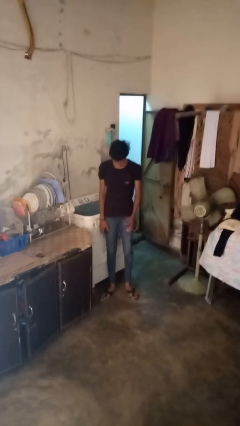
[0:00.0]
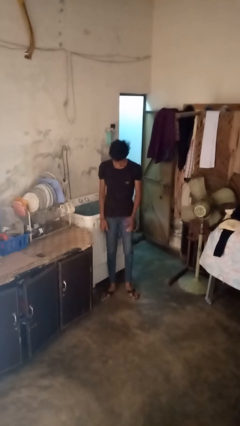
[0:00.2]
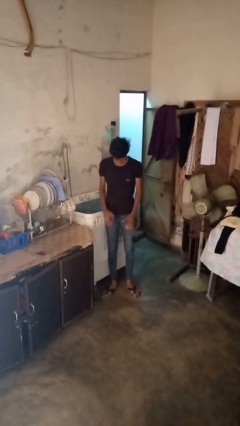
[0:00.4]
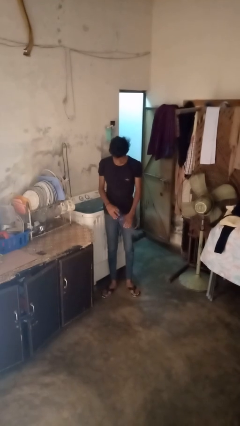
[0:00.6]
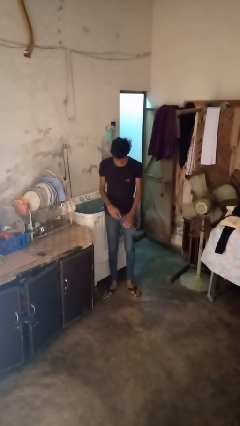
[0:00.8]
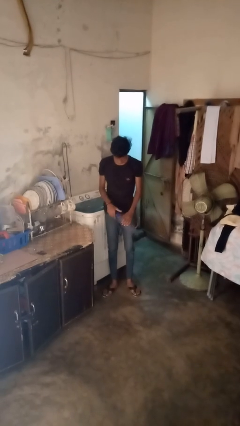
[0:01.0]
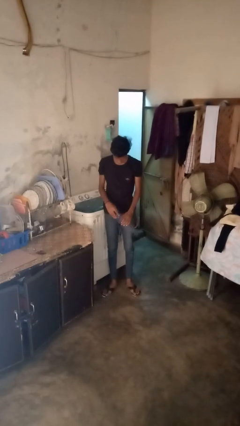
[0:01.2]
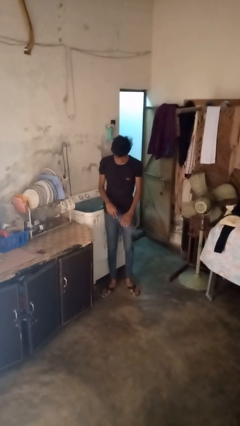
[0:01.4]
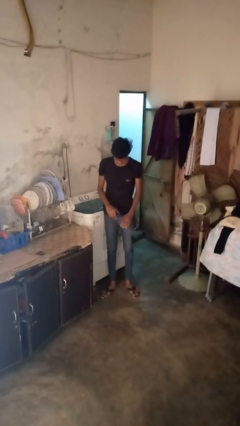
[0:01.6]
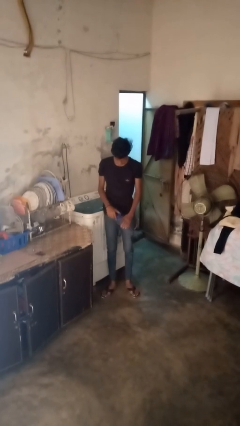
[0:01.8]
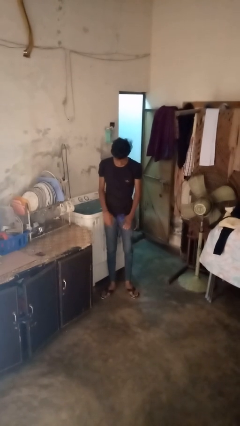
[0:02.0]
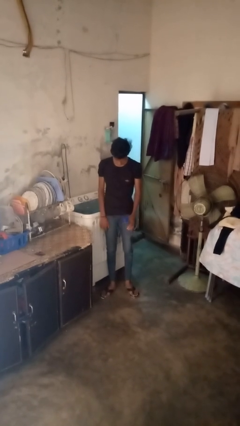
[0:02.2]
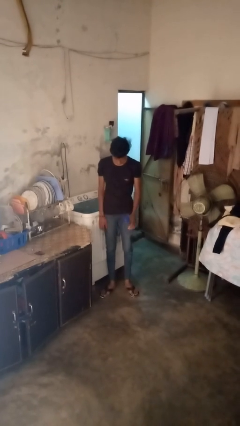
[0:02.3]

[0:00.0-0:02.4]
person screws lid to bottle

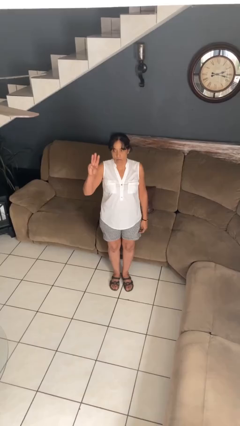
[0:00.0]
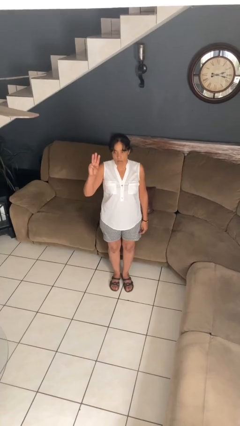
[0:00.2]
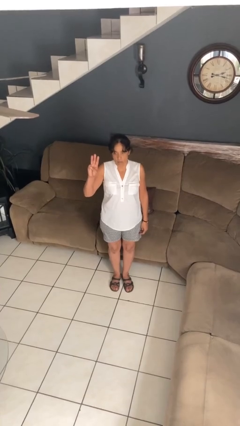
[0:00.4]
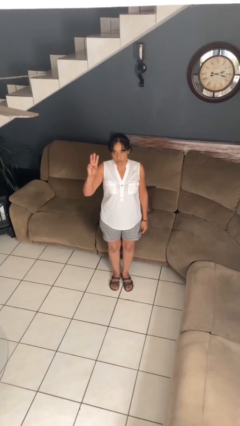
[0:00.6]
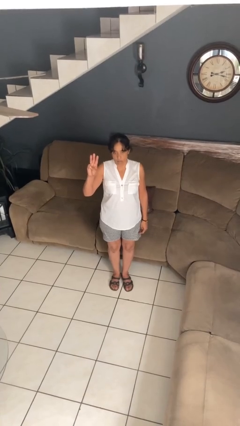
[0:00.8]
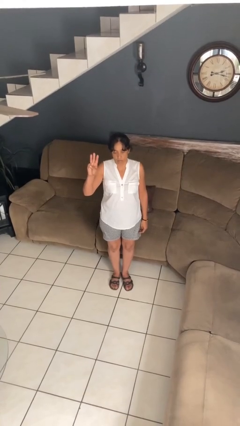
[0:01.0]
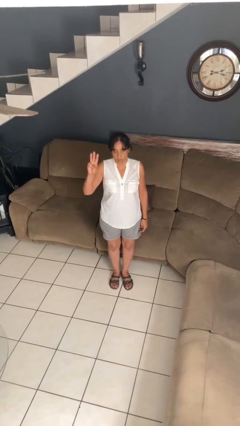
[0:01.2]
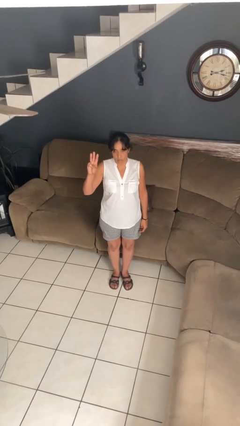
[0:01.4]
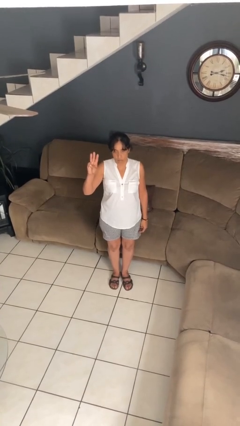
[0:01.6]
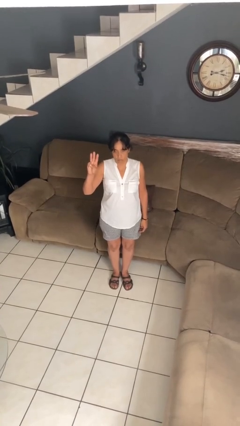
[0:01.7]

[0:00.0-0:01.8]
person gestures number three

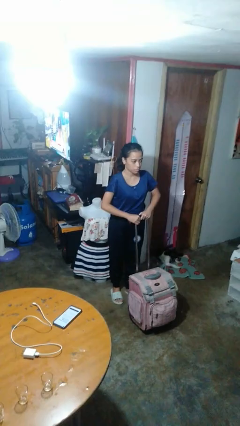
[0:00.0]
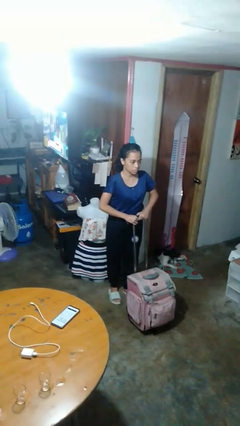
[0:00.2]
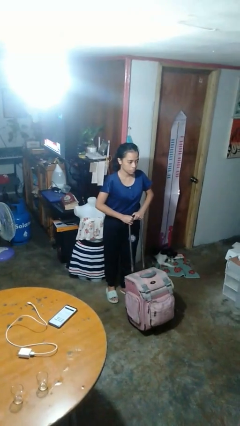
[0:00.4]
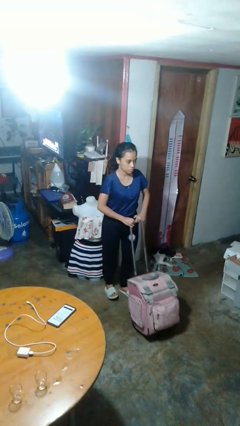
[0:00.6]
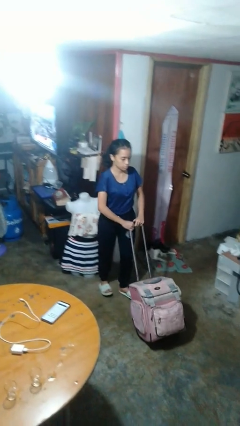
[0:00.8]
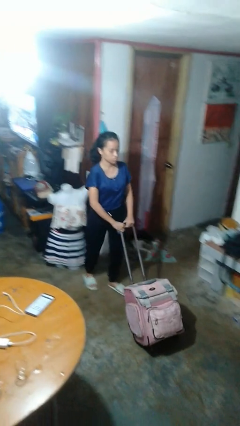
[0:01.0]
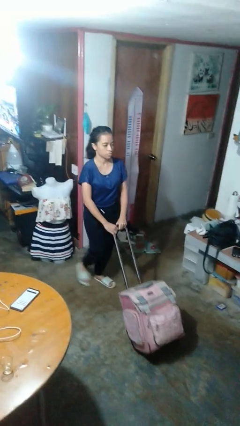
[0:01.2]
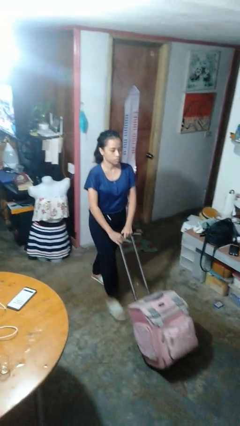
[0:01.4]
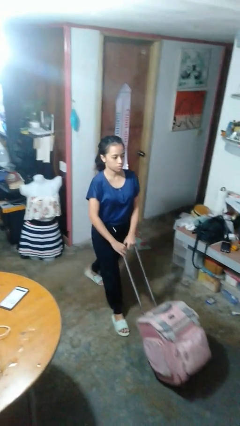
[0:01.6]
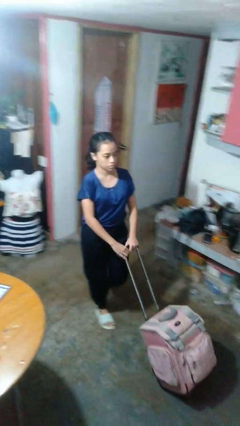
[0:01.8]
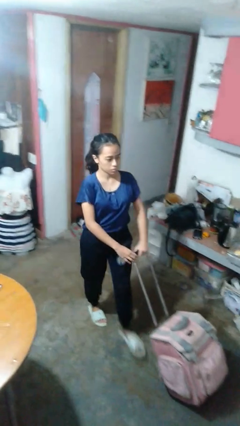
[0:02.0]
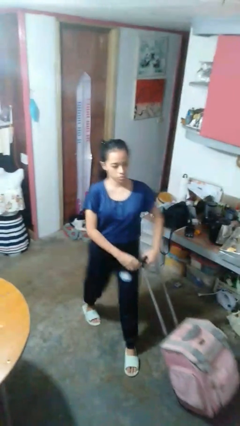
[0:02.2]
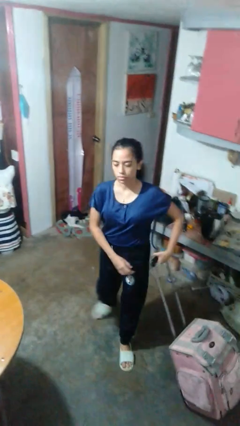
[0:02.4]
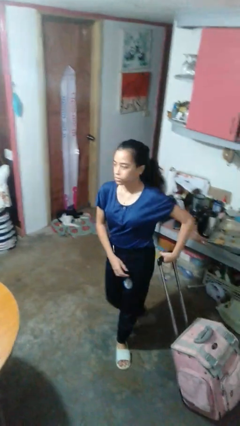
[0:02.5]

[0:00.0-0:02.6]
person pushes wheeled cart

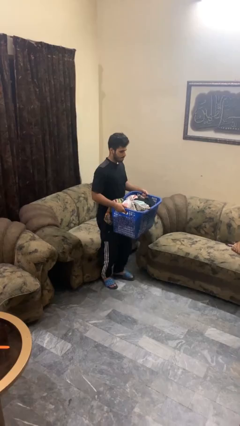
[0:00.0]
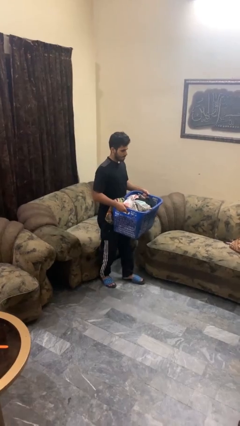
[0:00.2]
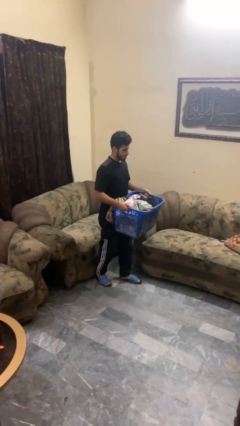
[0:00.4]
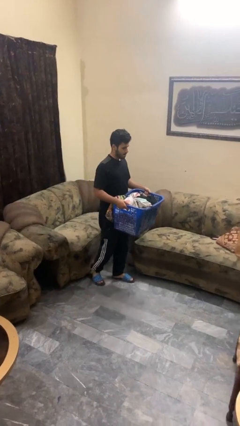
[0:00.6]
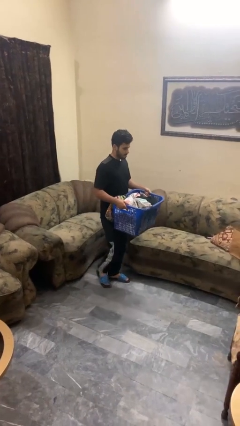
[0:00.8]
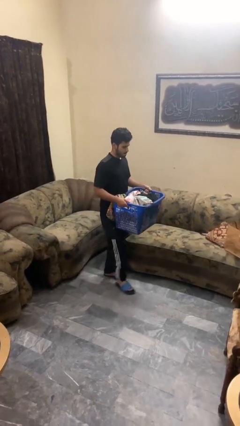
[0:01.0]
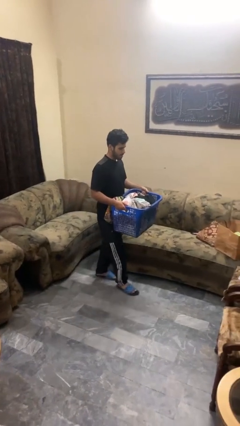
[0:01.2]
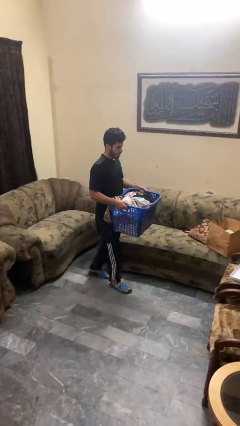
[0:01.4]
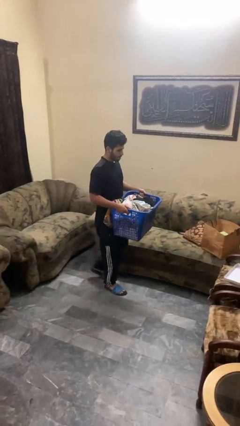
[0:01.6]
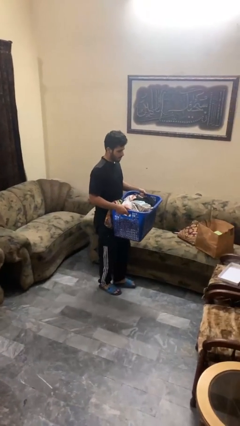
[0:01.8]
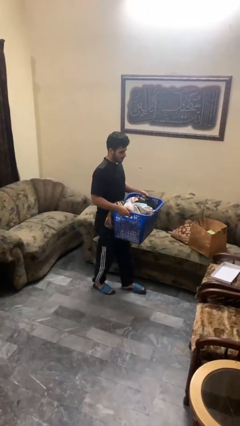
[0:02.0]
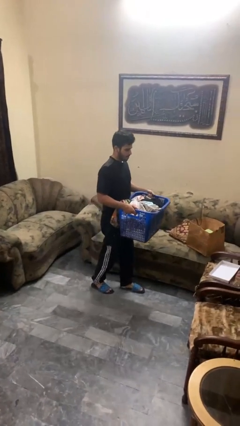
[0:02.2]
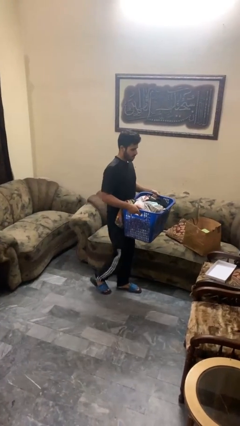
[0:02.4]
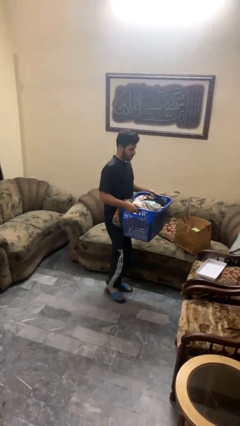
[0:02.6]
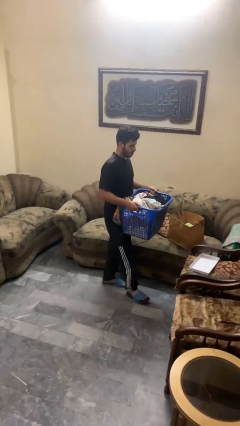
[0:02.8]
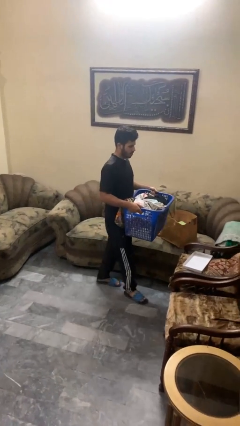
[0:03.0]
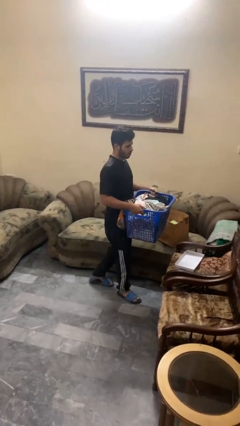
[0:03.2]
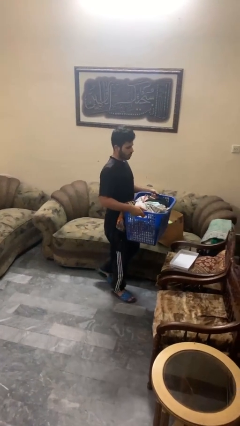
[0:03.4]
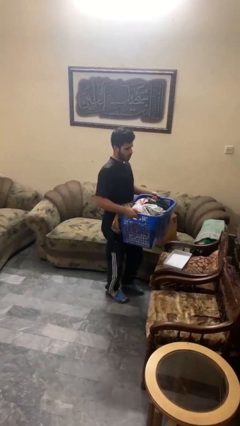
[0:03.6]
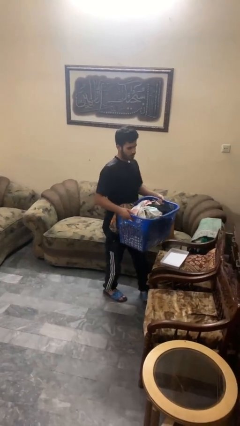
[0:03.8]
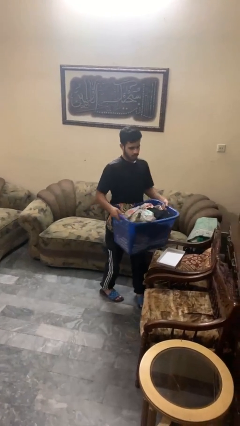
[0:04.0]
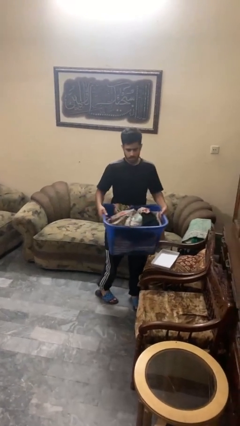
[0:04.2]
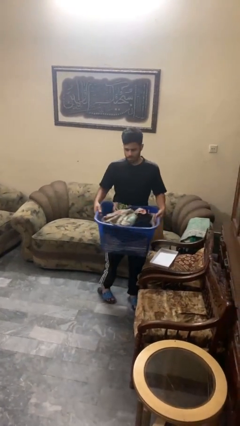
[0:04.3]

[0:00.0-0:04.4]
person carries laundry basket

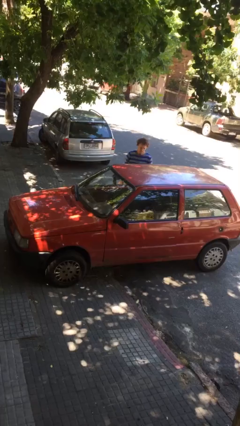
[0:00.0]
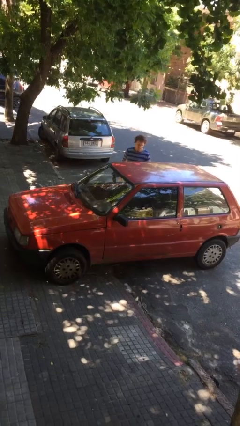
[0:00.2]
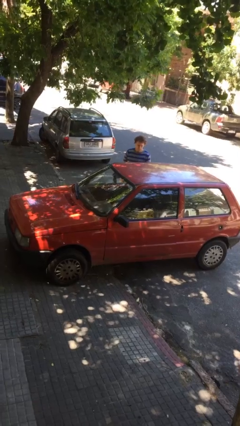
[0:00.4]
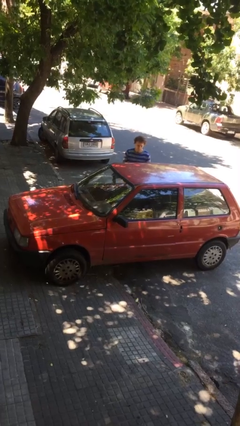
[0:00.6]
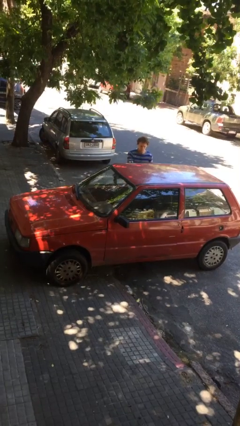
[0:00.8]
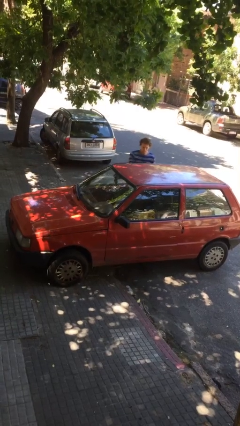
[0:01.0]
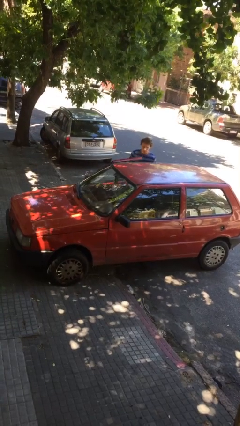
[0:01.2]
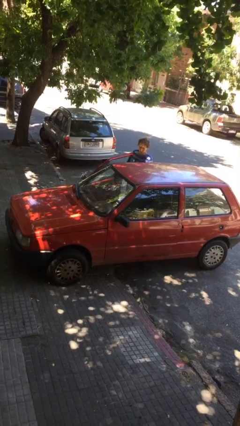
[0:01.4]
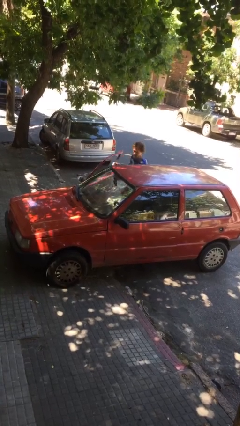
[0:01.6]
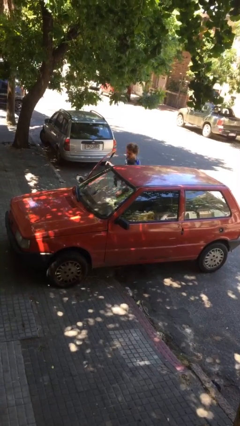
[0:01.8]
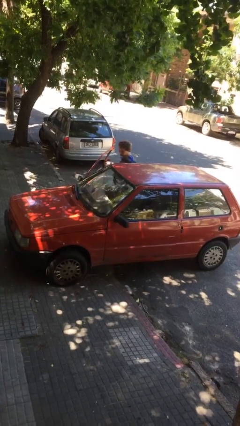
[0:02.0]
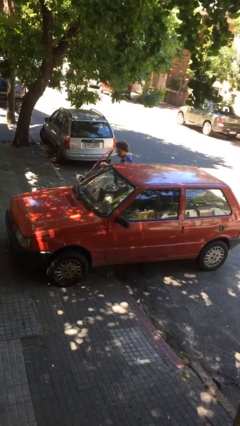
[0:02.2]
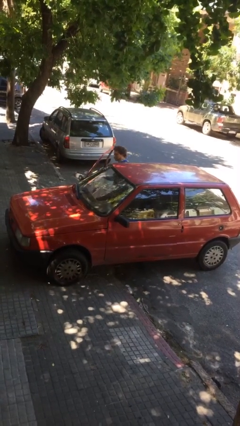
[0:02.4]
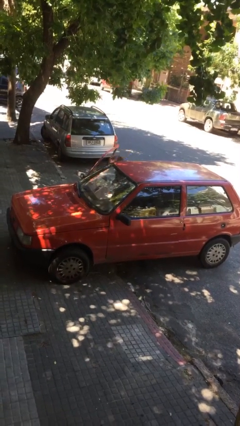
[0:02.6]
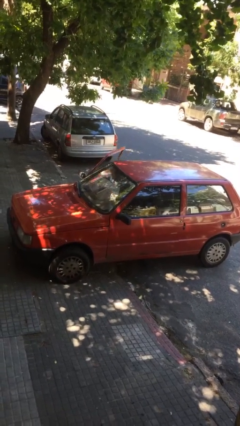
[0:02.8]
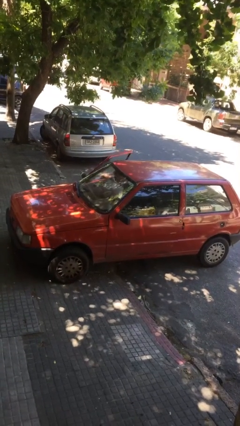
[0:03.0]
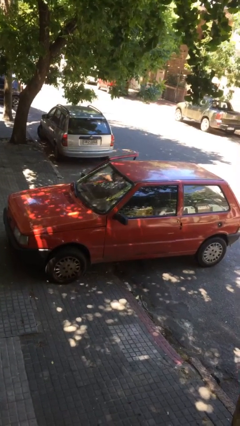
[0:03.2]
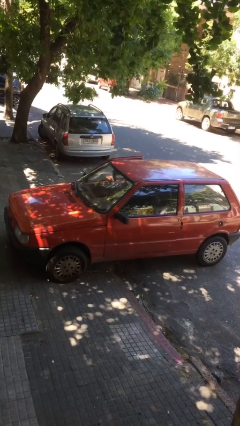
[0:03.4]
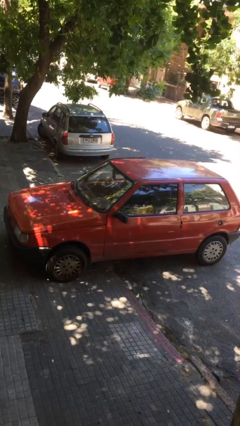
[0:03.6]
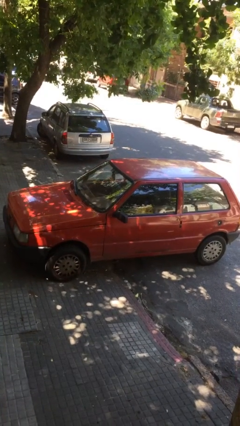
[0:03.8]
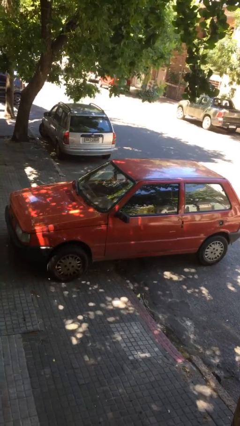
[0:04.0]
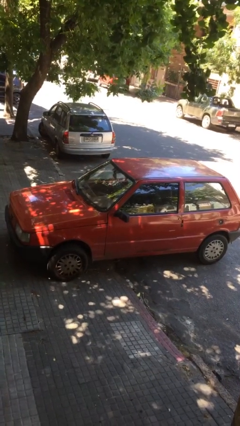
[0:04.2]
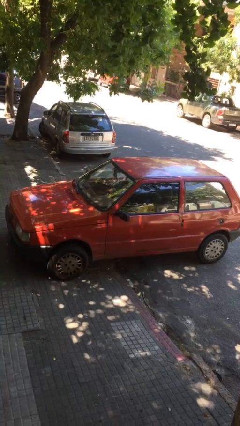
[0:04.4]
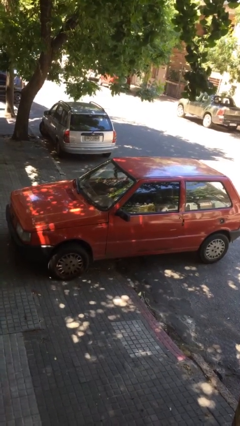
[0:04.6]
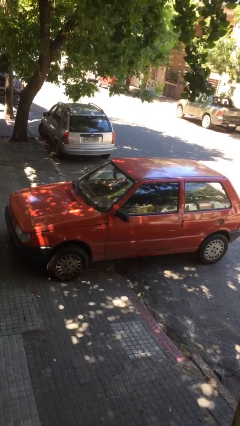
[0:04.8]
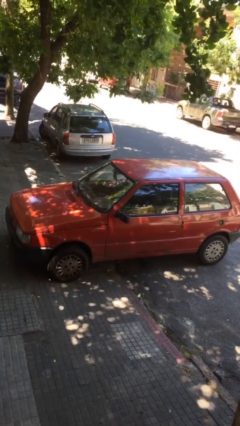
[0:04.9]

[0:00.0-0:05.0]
car picks up person

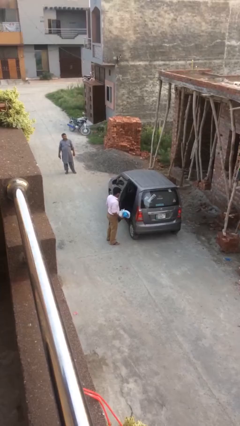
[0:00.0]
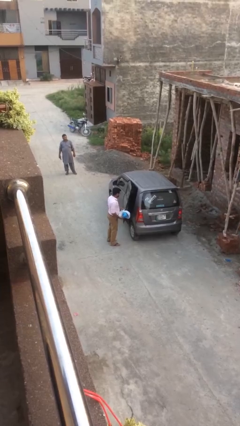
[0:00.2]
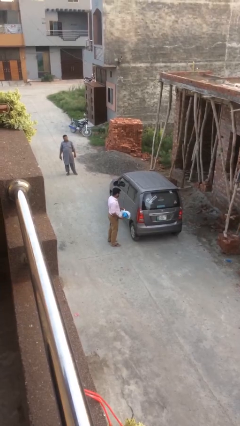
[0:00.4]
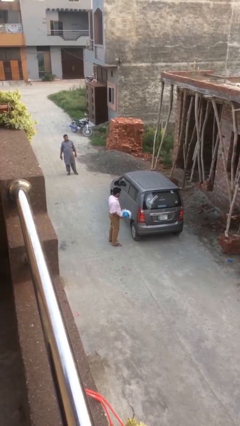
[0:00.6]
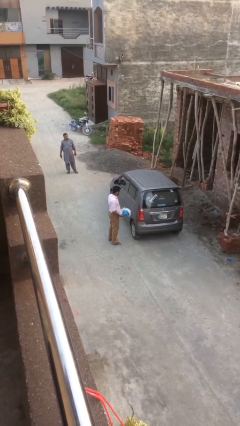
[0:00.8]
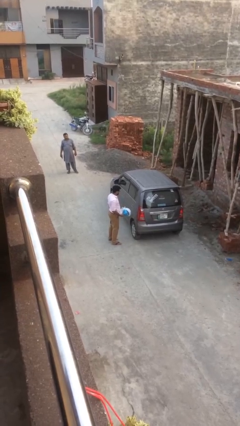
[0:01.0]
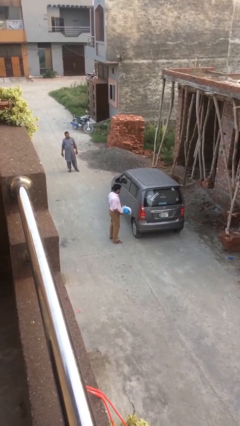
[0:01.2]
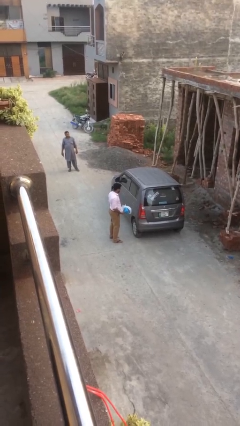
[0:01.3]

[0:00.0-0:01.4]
person closes car door
